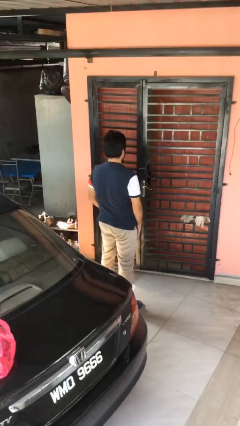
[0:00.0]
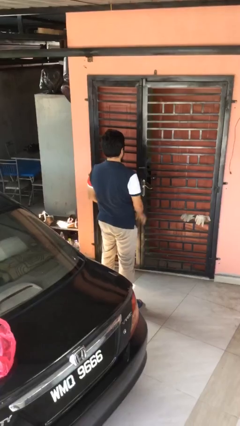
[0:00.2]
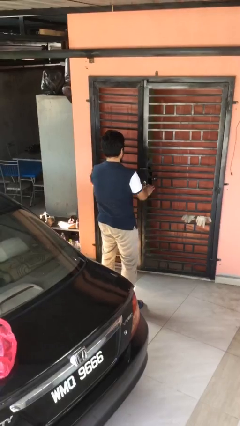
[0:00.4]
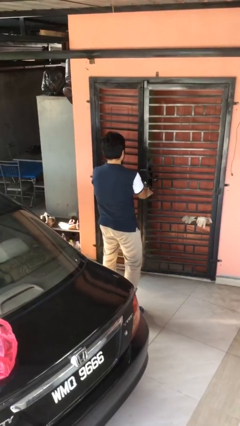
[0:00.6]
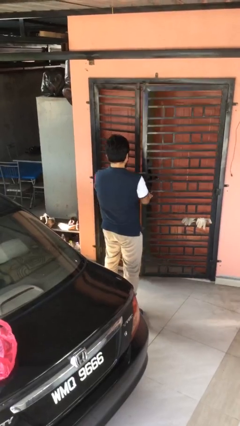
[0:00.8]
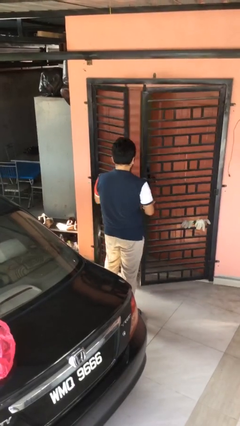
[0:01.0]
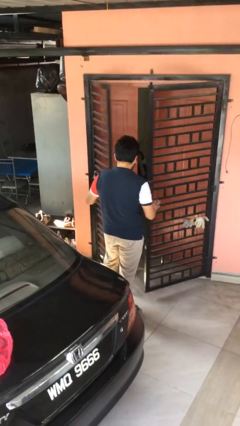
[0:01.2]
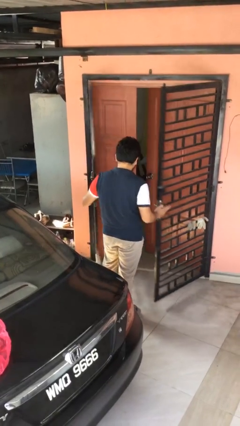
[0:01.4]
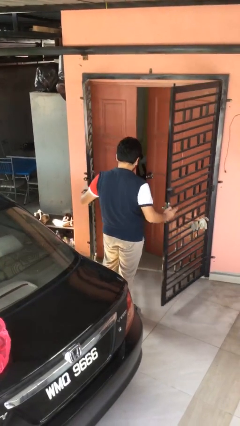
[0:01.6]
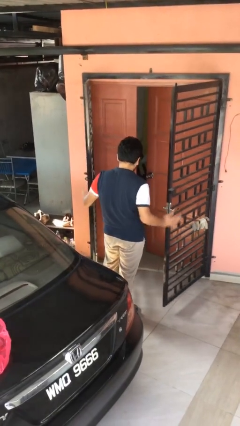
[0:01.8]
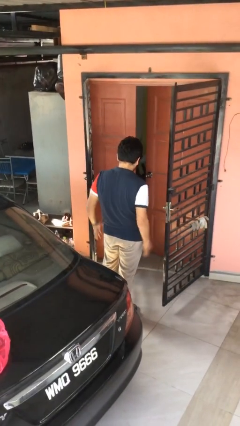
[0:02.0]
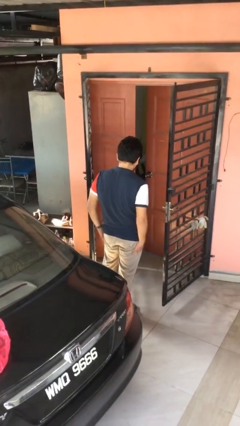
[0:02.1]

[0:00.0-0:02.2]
person opens gate

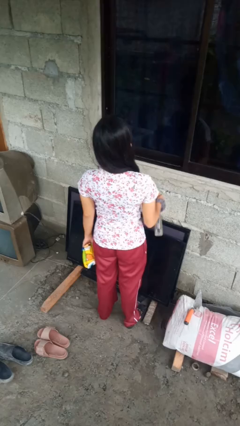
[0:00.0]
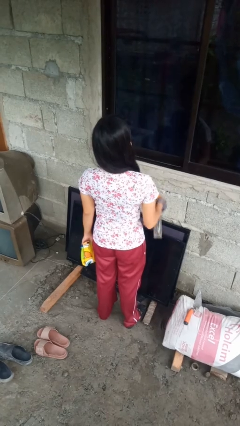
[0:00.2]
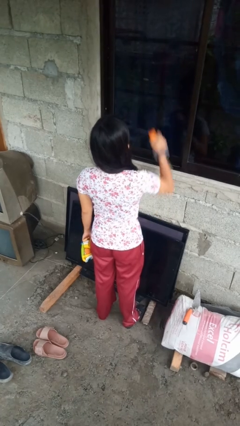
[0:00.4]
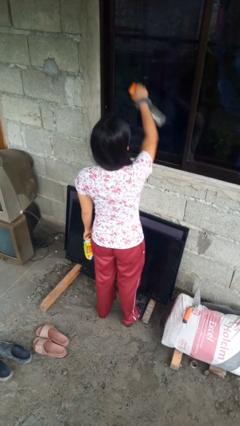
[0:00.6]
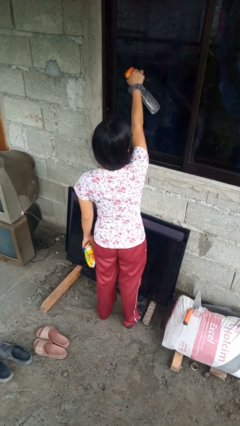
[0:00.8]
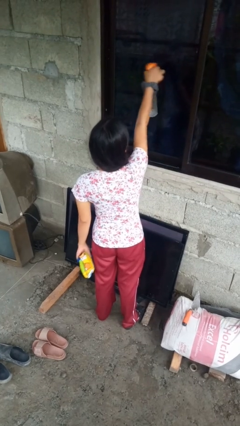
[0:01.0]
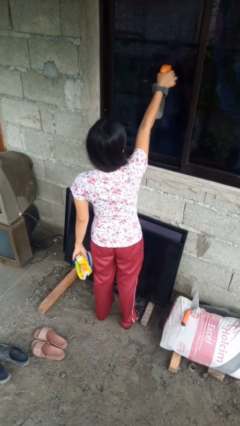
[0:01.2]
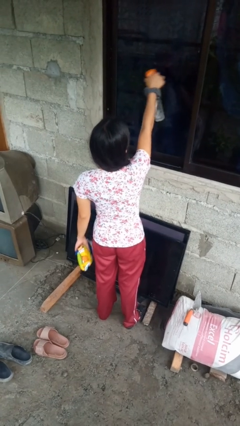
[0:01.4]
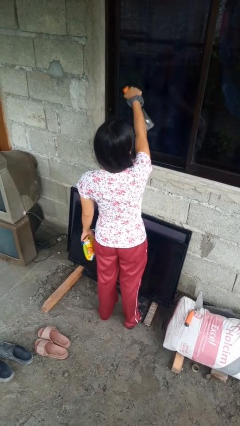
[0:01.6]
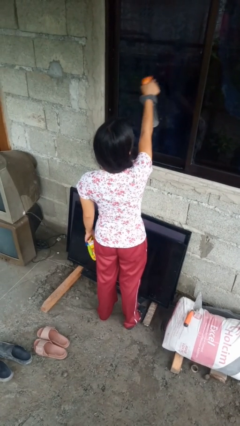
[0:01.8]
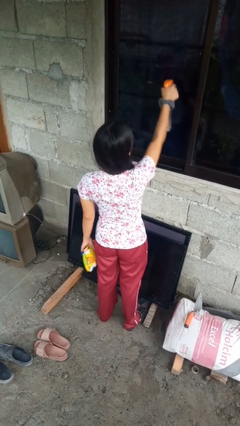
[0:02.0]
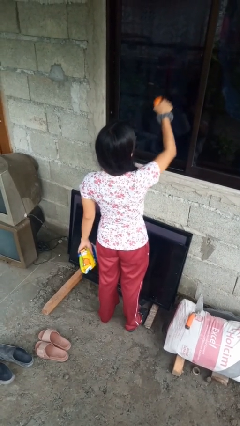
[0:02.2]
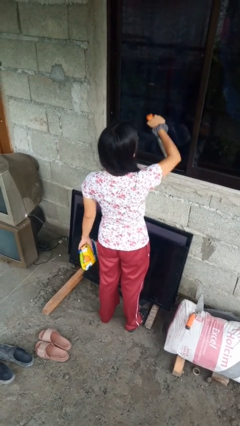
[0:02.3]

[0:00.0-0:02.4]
person sprays from bottle

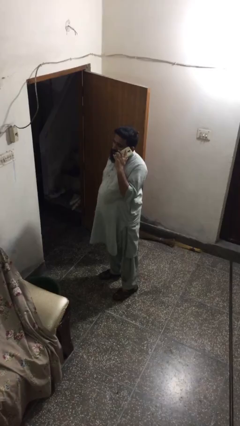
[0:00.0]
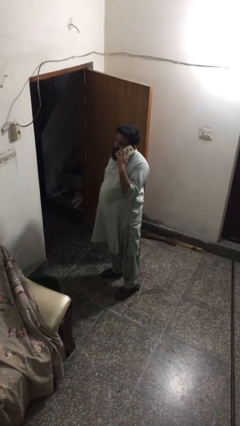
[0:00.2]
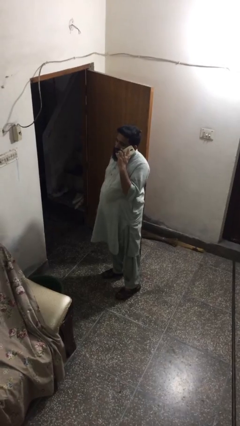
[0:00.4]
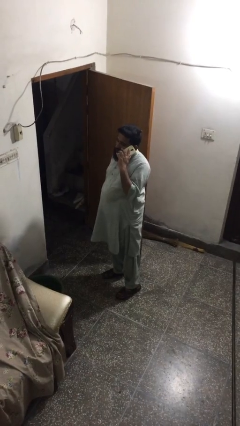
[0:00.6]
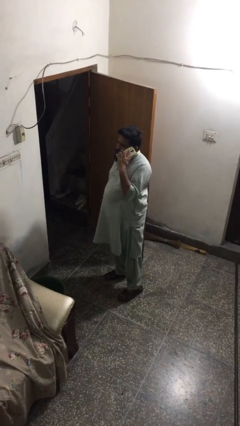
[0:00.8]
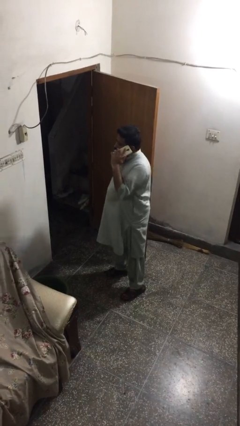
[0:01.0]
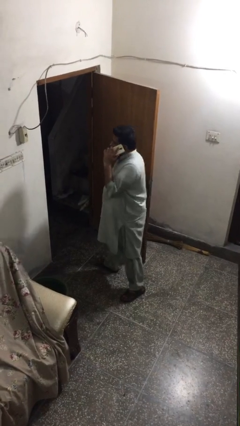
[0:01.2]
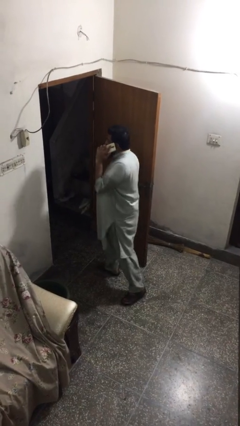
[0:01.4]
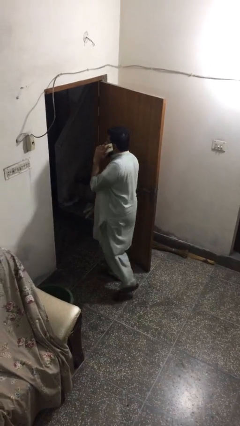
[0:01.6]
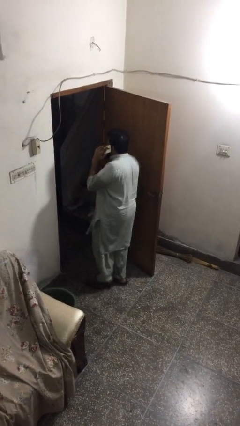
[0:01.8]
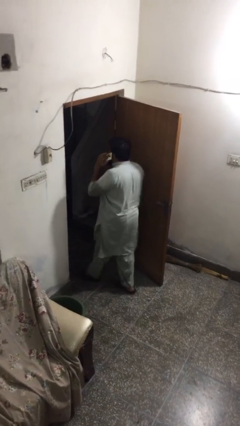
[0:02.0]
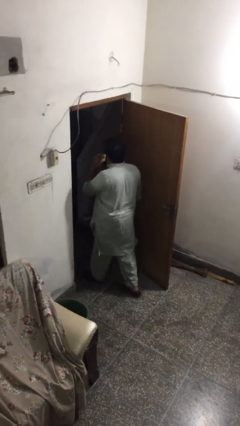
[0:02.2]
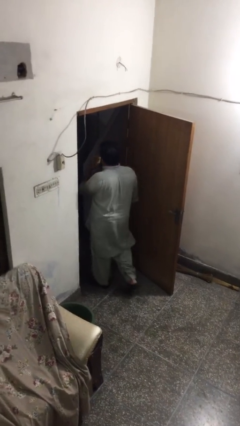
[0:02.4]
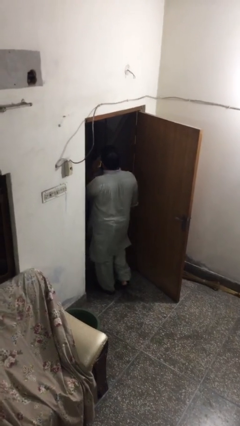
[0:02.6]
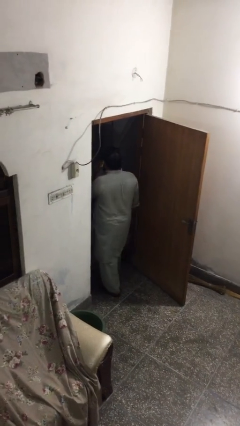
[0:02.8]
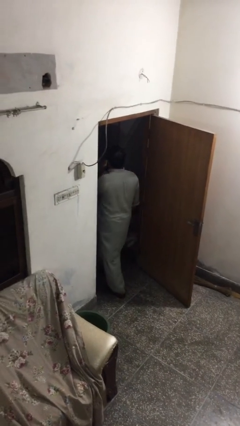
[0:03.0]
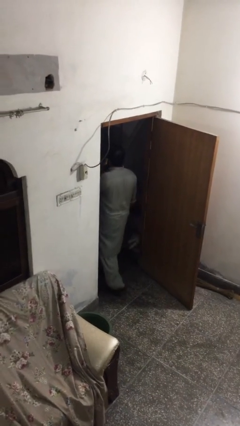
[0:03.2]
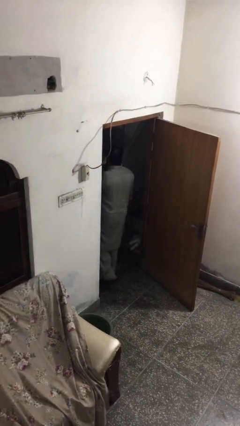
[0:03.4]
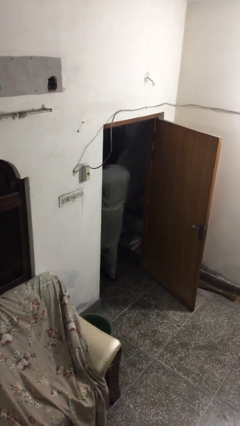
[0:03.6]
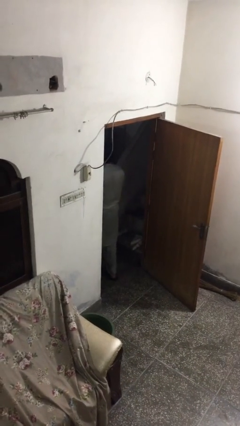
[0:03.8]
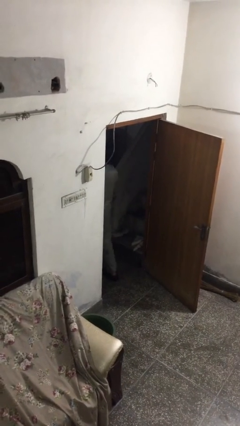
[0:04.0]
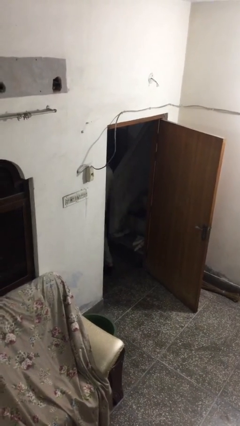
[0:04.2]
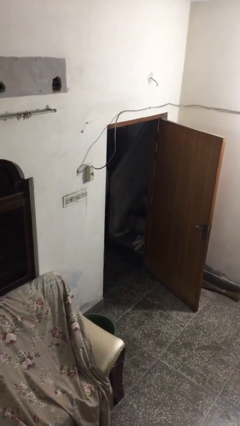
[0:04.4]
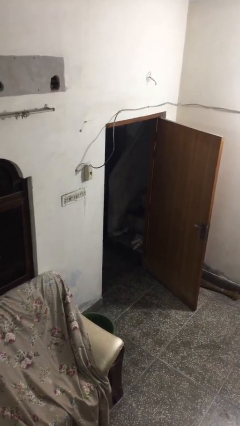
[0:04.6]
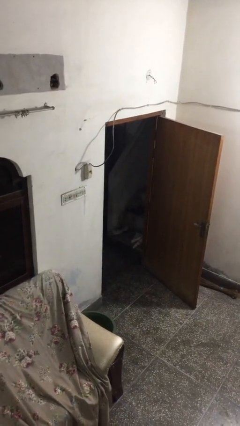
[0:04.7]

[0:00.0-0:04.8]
person exits scene through structure

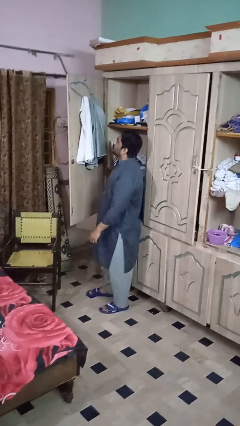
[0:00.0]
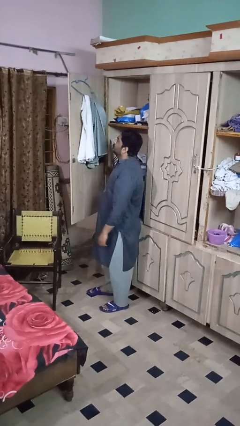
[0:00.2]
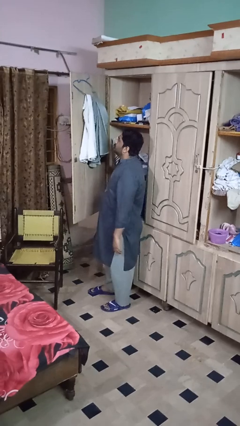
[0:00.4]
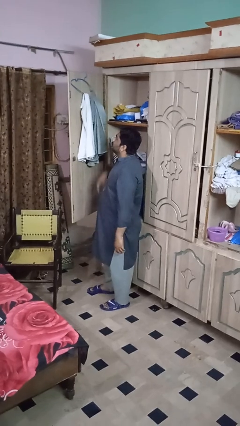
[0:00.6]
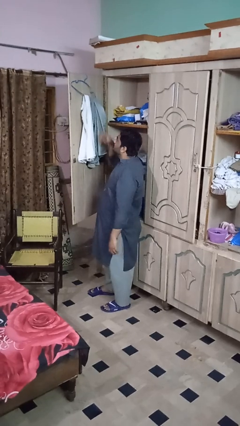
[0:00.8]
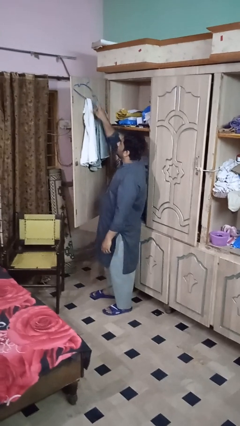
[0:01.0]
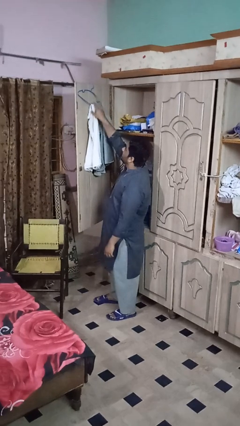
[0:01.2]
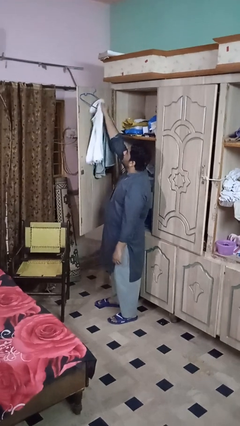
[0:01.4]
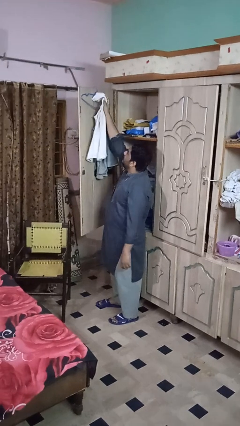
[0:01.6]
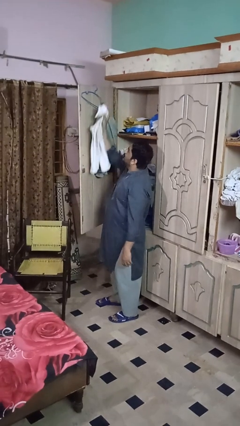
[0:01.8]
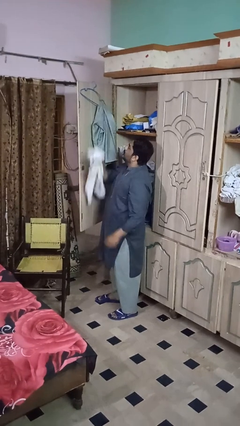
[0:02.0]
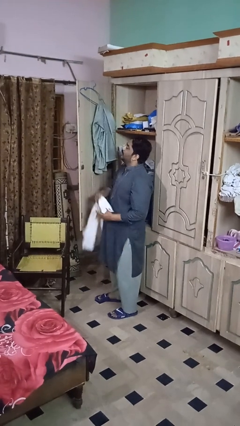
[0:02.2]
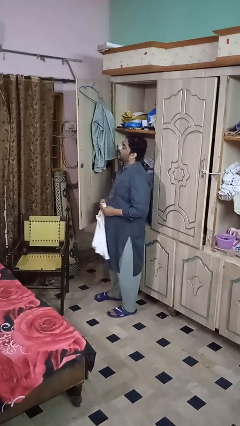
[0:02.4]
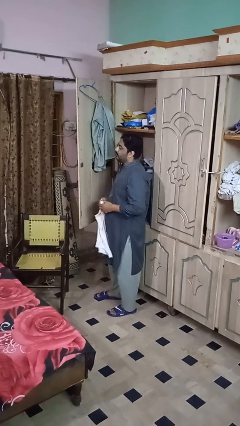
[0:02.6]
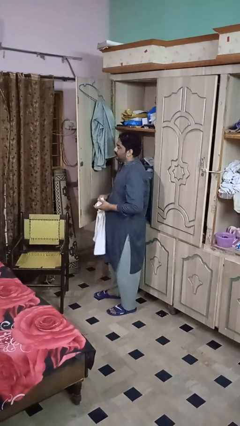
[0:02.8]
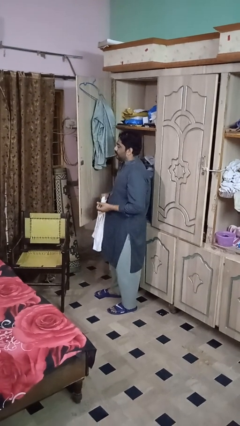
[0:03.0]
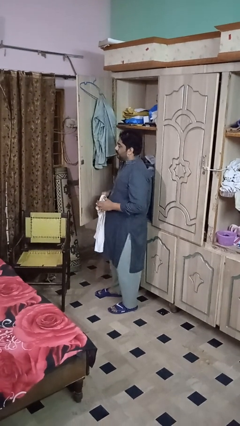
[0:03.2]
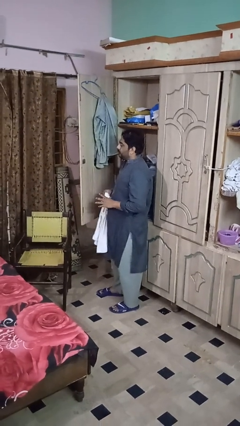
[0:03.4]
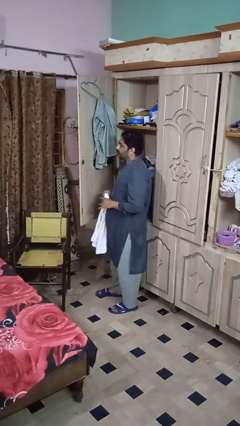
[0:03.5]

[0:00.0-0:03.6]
person takes clothes from closet

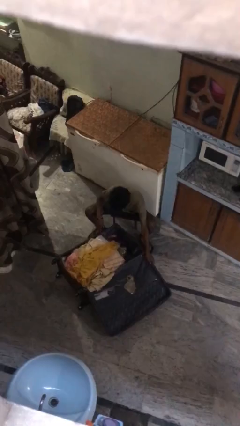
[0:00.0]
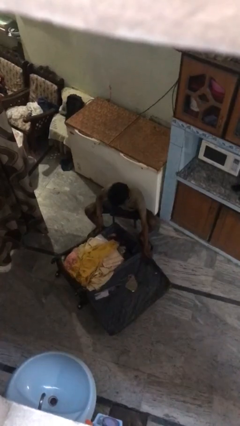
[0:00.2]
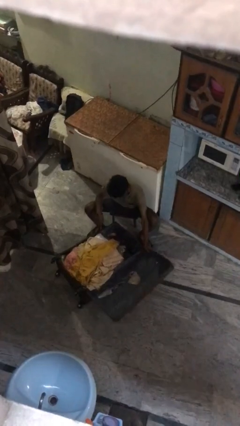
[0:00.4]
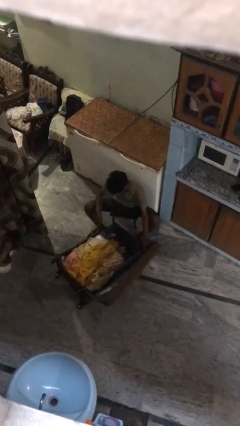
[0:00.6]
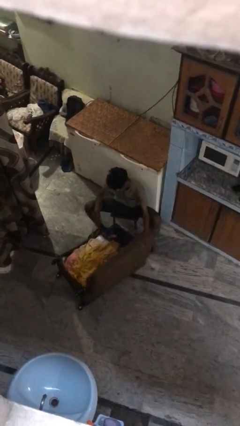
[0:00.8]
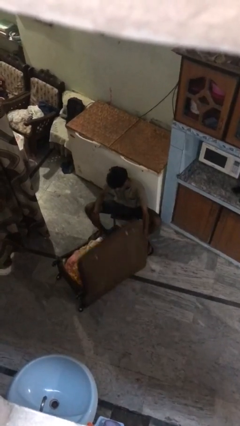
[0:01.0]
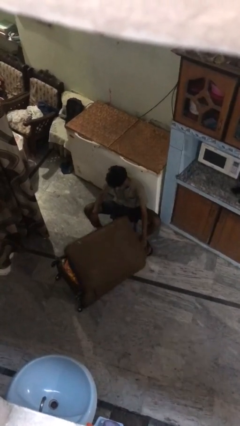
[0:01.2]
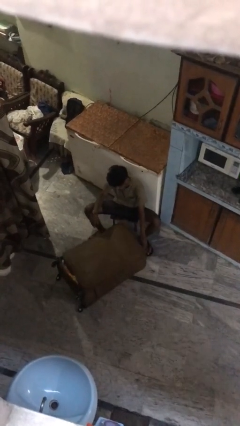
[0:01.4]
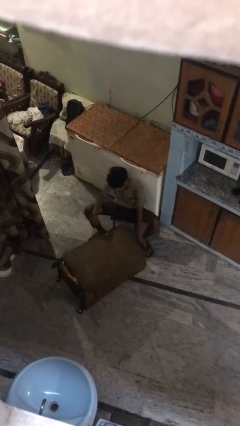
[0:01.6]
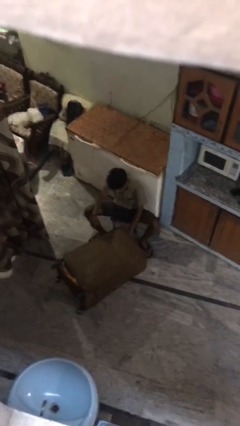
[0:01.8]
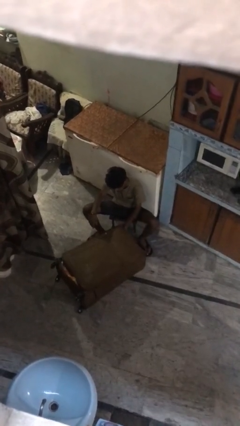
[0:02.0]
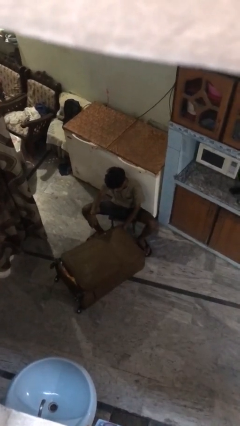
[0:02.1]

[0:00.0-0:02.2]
person closes suitcase

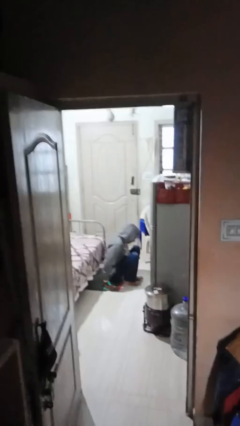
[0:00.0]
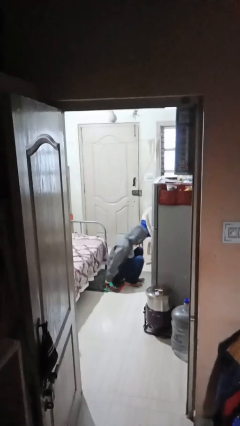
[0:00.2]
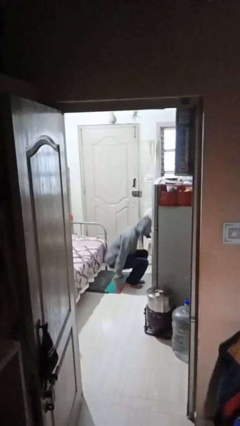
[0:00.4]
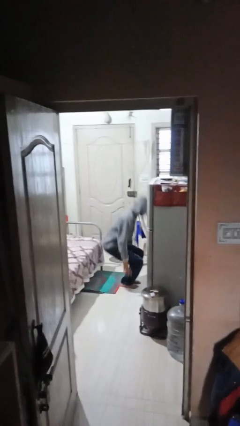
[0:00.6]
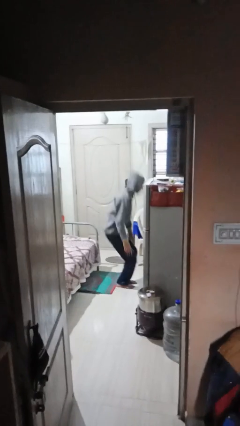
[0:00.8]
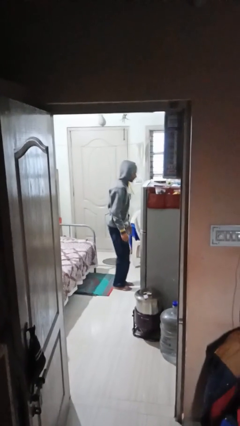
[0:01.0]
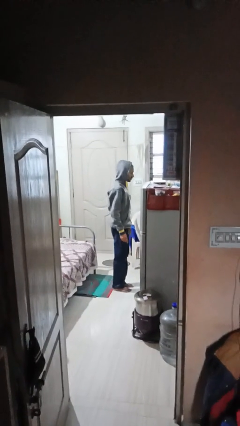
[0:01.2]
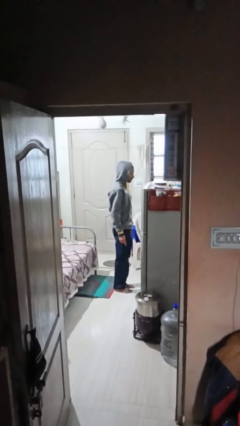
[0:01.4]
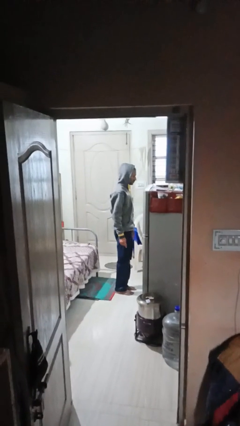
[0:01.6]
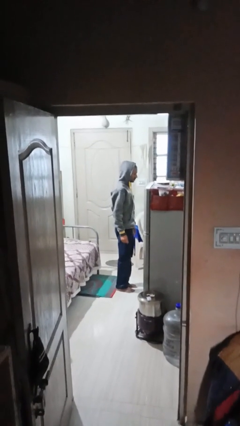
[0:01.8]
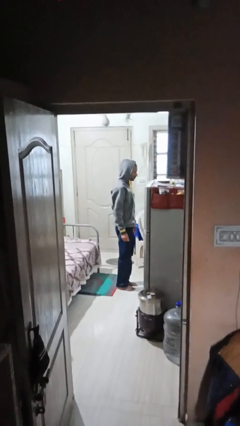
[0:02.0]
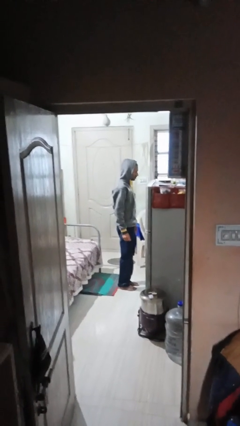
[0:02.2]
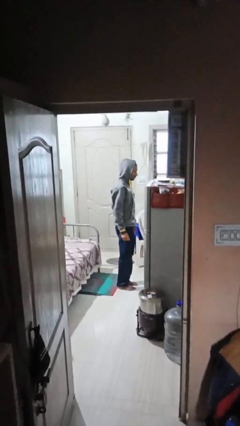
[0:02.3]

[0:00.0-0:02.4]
person stands up
